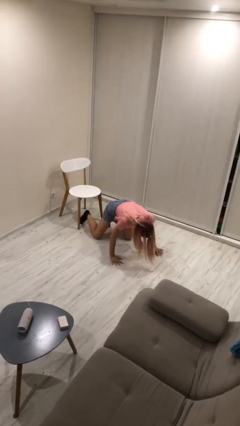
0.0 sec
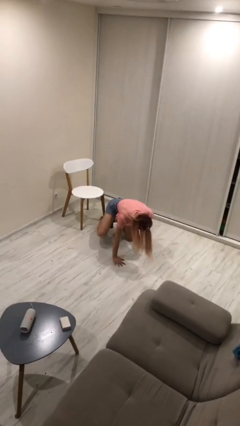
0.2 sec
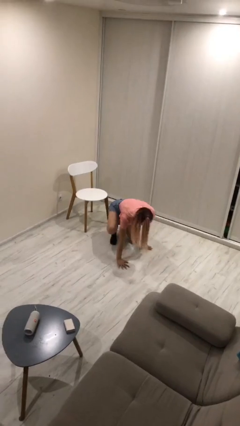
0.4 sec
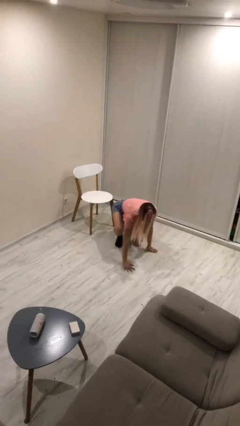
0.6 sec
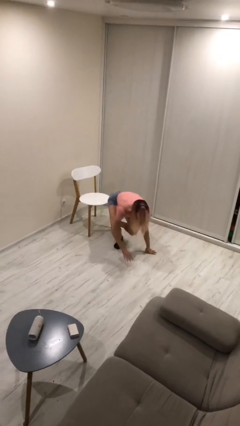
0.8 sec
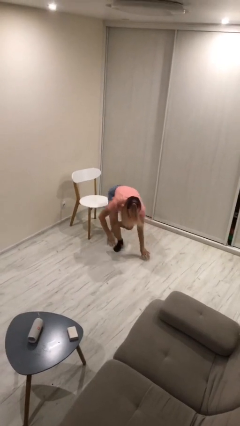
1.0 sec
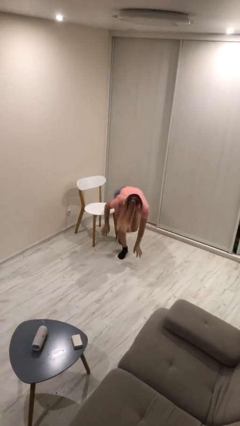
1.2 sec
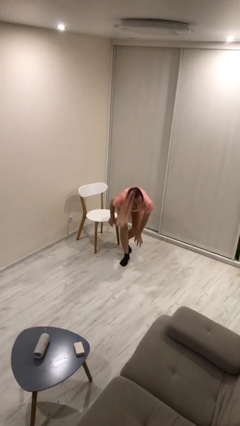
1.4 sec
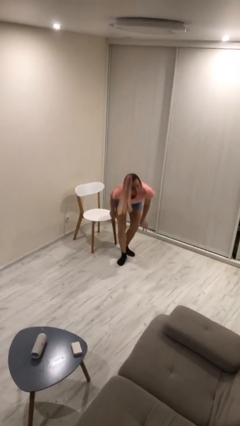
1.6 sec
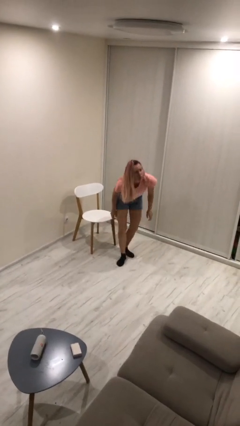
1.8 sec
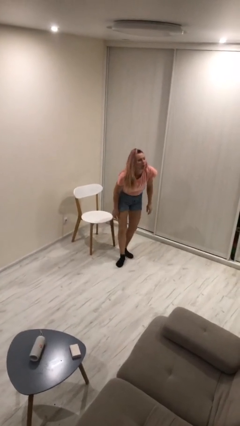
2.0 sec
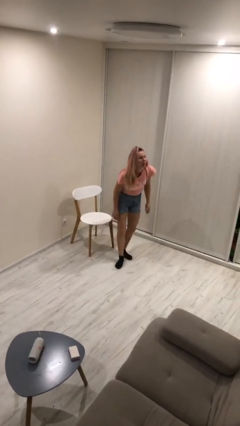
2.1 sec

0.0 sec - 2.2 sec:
person stands up from floor

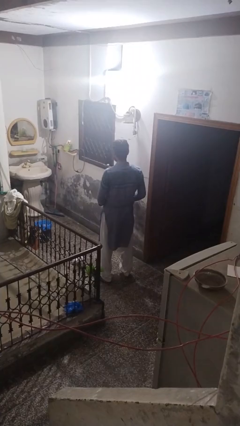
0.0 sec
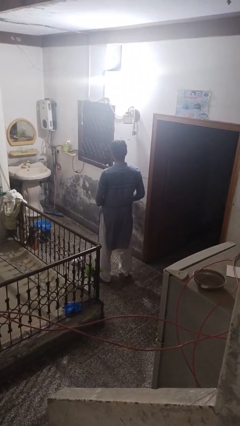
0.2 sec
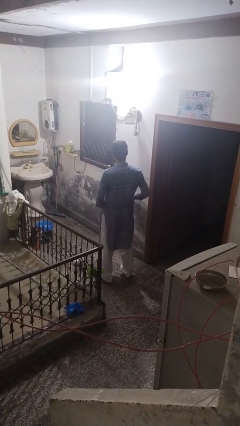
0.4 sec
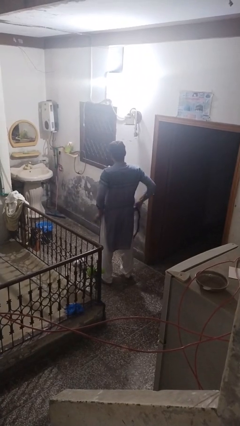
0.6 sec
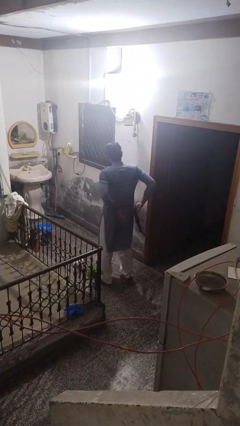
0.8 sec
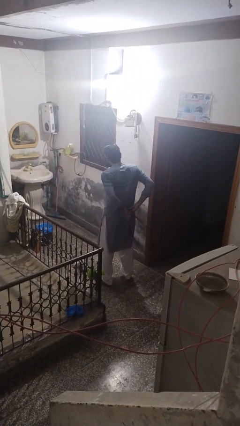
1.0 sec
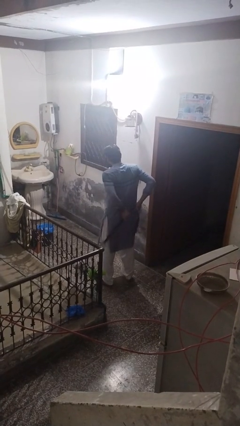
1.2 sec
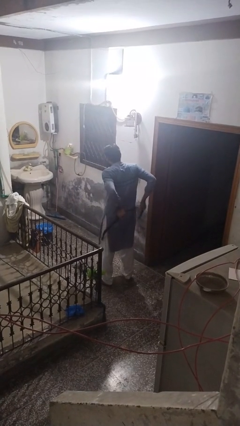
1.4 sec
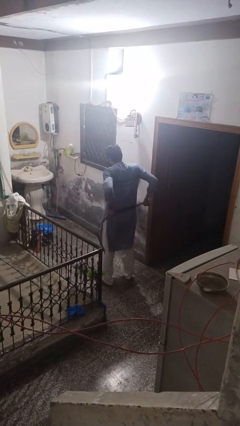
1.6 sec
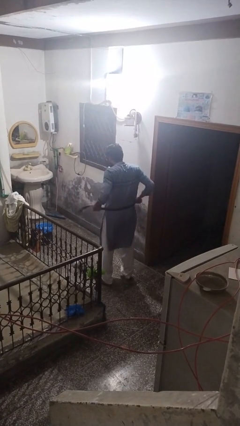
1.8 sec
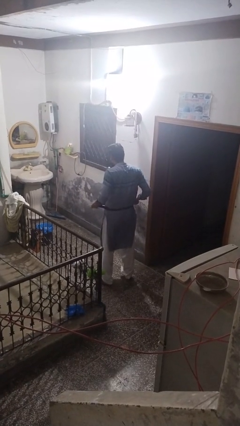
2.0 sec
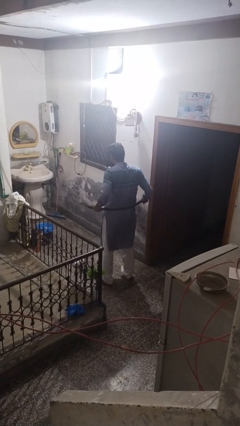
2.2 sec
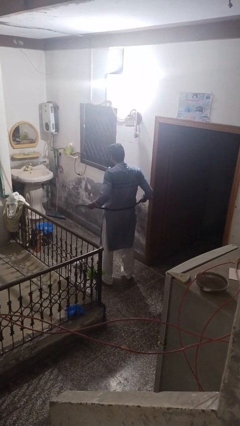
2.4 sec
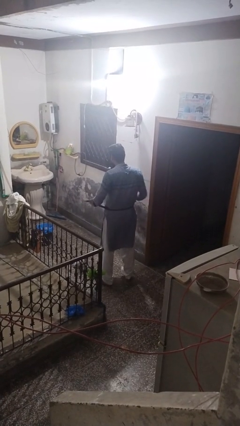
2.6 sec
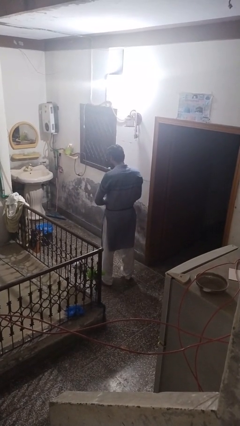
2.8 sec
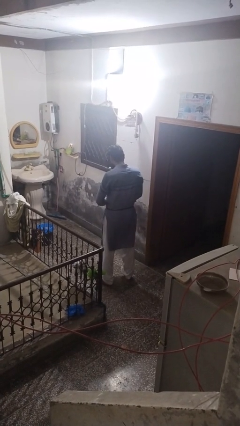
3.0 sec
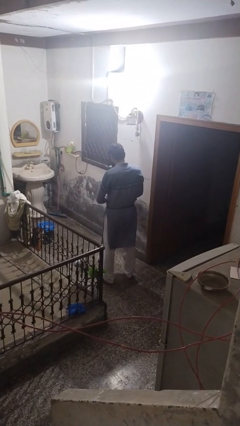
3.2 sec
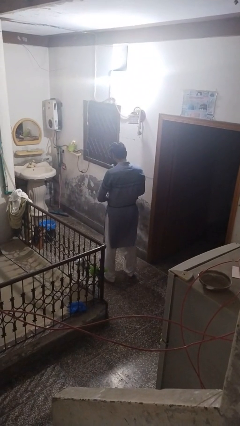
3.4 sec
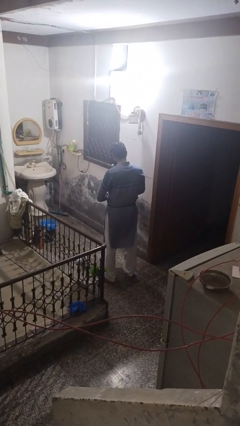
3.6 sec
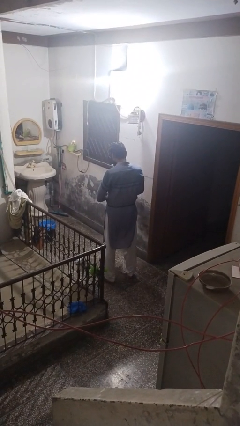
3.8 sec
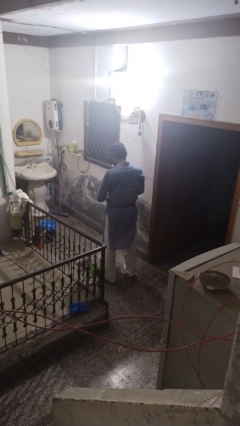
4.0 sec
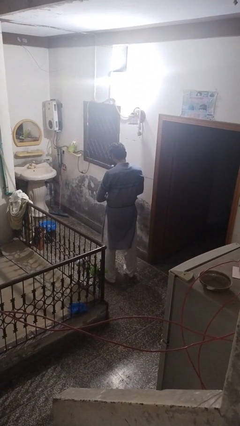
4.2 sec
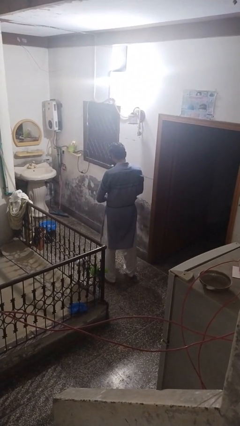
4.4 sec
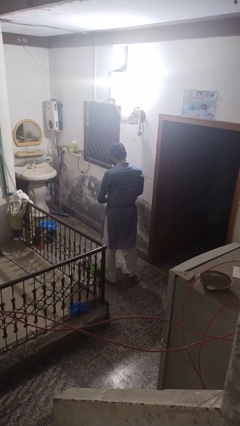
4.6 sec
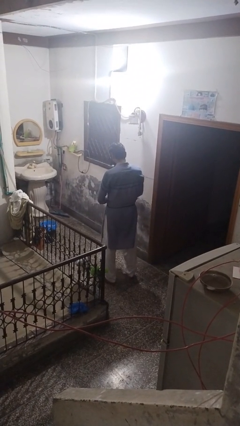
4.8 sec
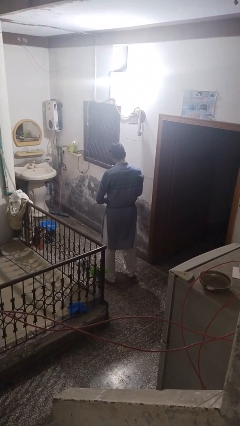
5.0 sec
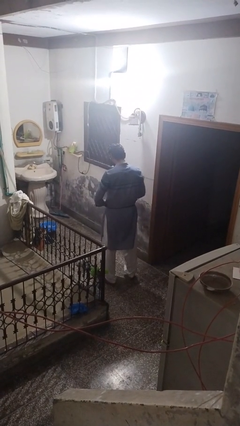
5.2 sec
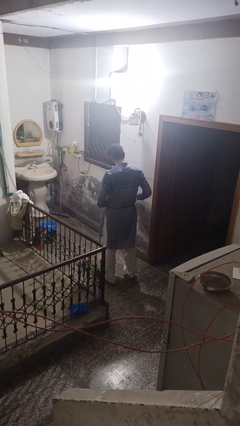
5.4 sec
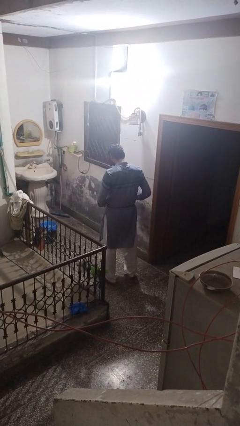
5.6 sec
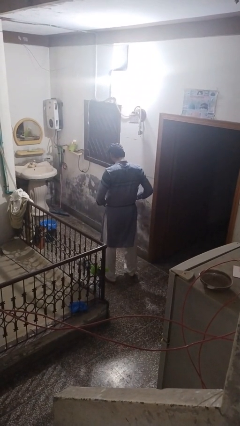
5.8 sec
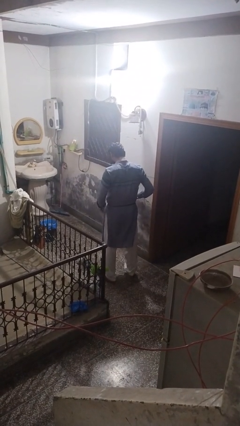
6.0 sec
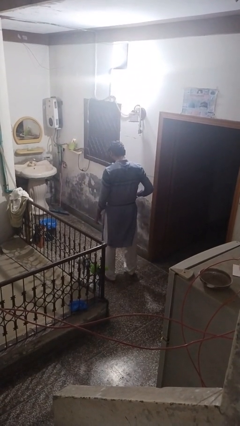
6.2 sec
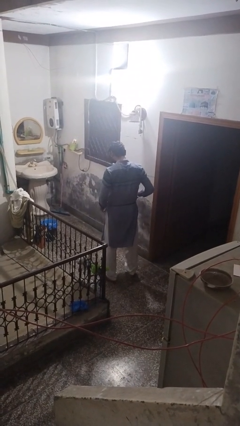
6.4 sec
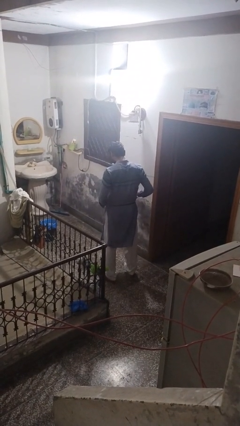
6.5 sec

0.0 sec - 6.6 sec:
person puts on belt

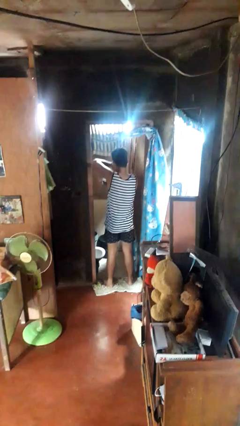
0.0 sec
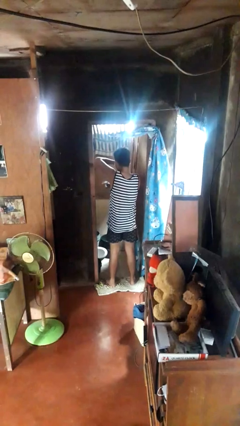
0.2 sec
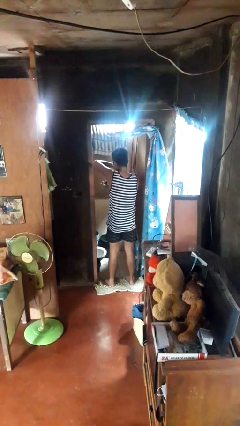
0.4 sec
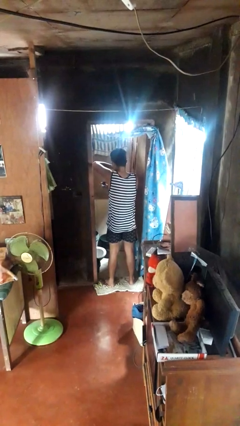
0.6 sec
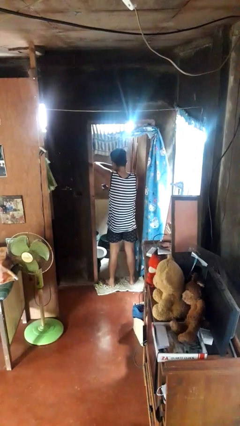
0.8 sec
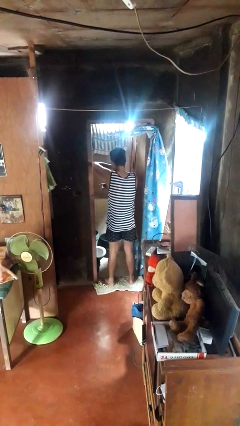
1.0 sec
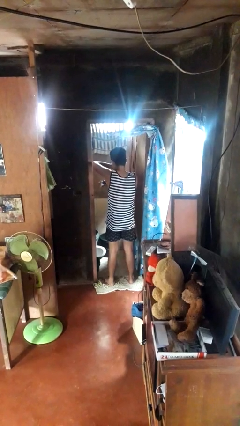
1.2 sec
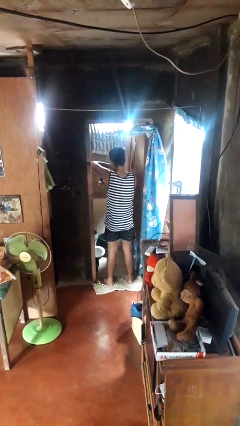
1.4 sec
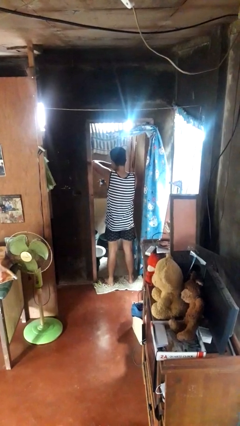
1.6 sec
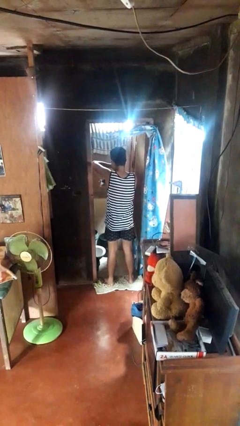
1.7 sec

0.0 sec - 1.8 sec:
person applies deodorant

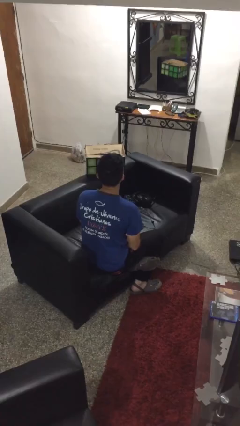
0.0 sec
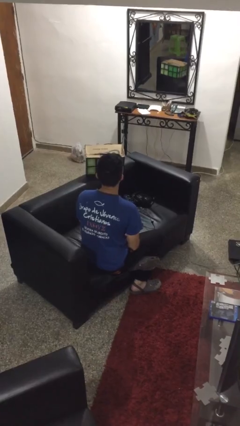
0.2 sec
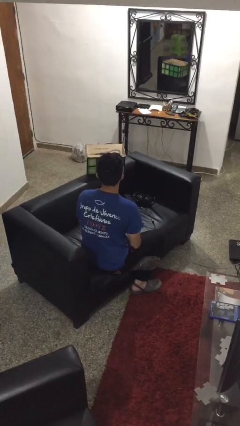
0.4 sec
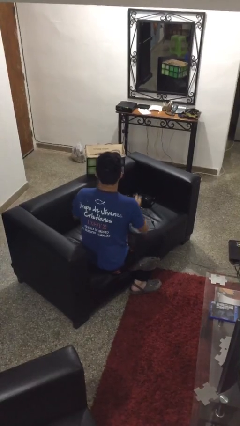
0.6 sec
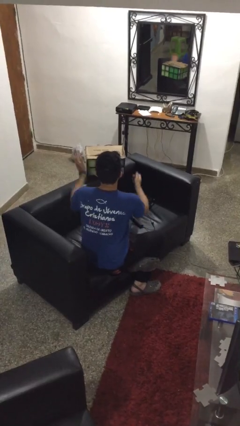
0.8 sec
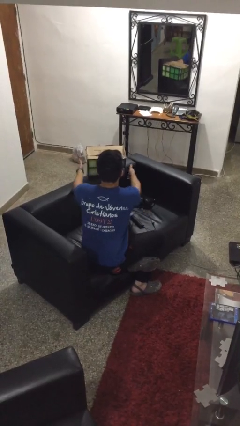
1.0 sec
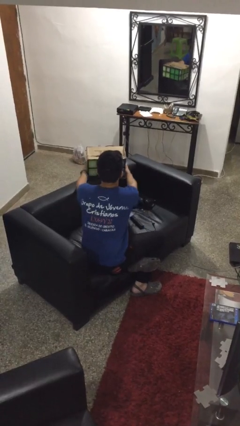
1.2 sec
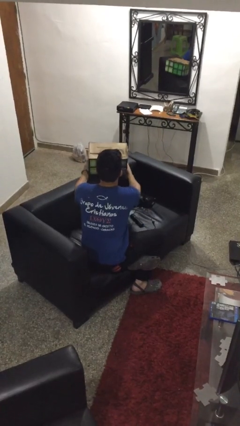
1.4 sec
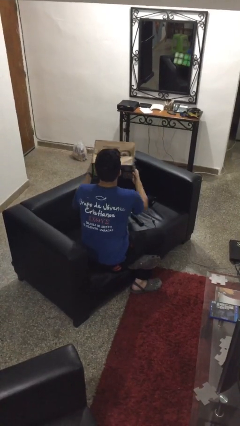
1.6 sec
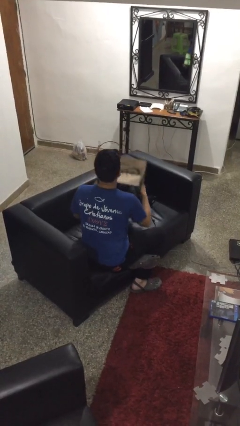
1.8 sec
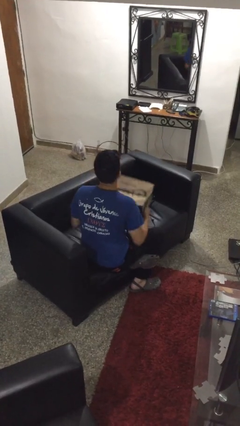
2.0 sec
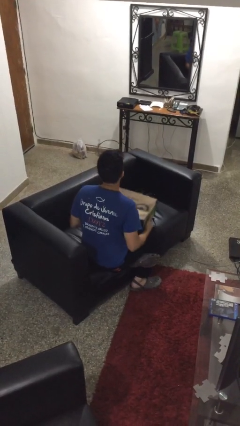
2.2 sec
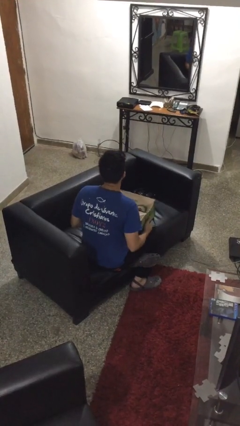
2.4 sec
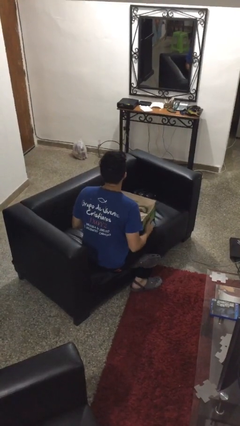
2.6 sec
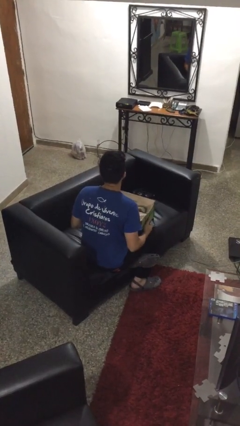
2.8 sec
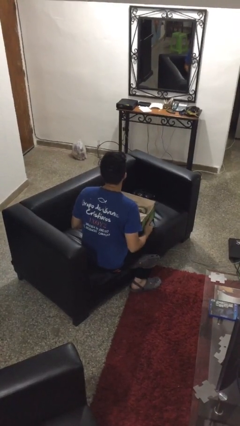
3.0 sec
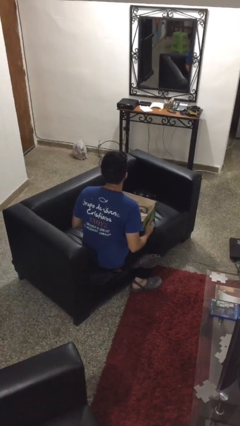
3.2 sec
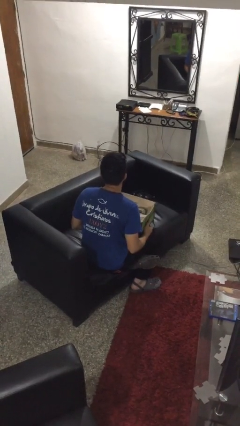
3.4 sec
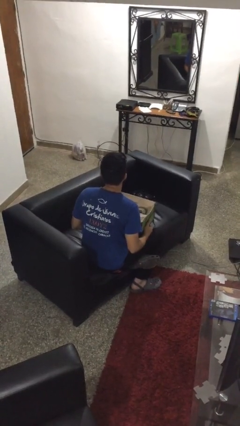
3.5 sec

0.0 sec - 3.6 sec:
person picks up object from couch

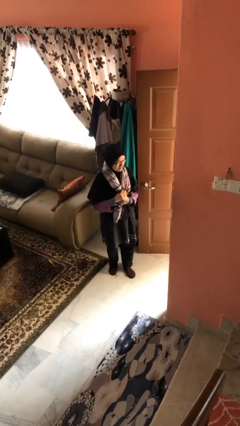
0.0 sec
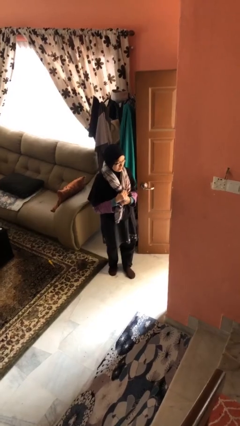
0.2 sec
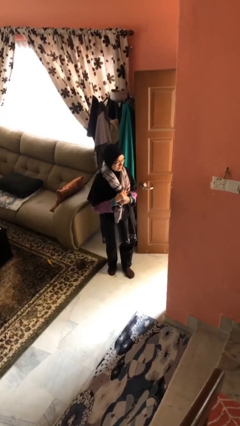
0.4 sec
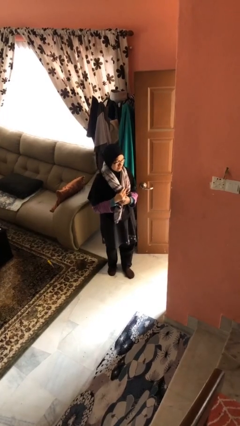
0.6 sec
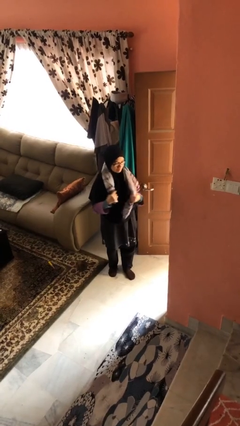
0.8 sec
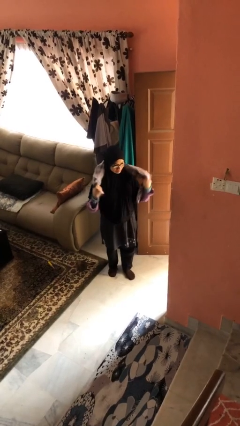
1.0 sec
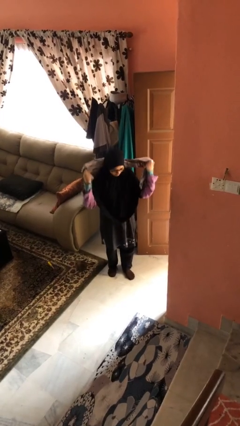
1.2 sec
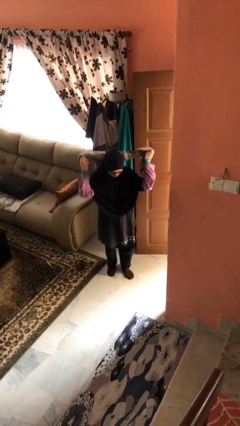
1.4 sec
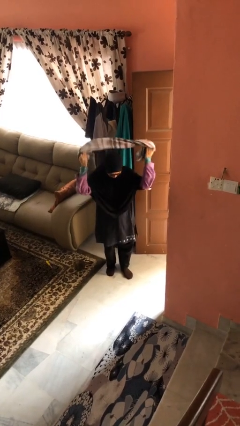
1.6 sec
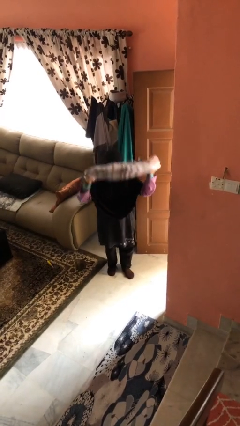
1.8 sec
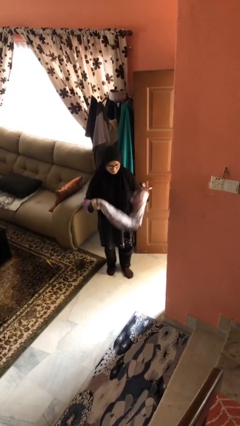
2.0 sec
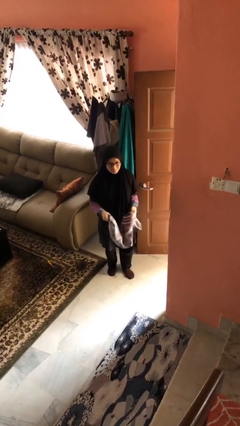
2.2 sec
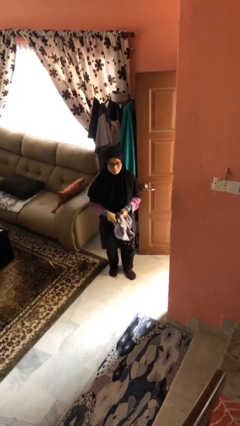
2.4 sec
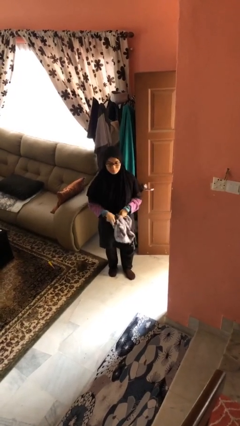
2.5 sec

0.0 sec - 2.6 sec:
person takes off scarf

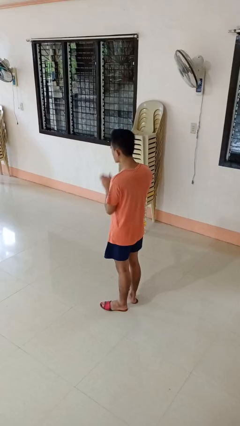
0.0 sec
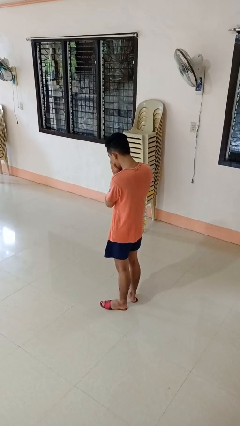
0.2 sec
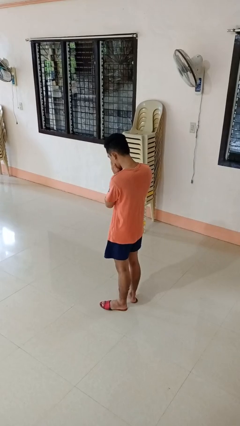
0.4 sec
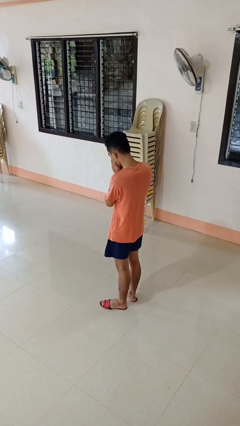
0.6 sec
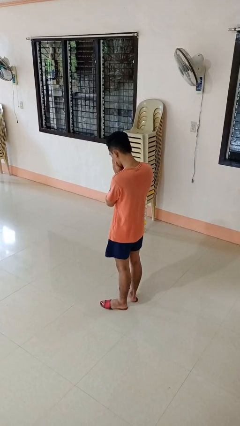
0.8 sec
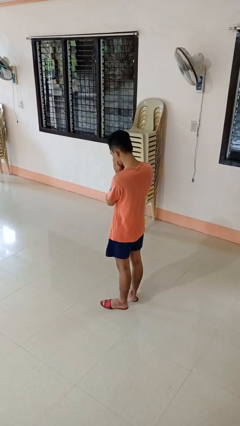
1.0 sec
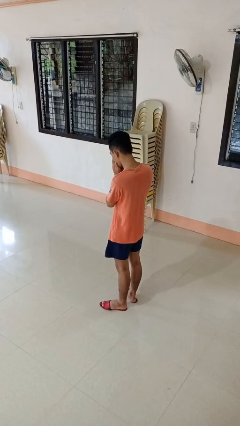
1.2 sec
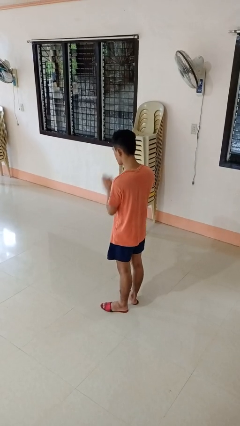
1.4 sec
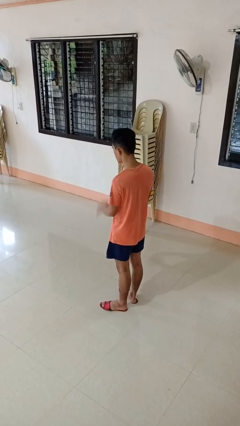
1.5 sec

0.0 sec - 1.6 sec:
person sneezes into hand
